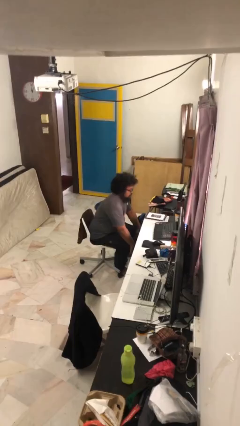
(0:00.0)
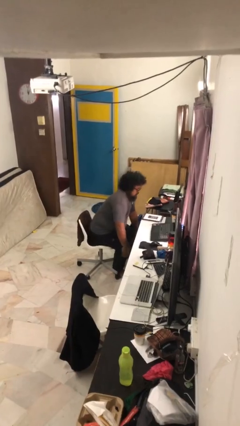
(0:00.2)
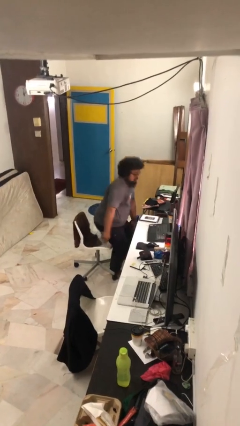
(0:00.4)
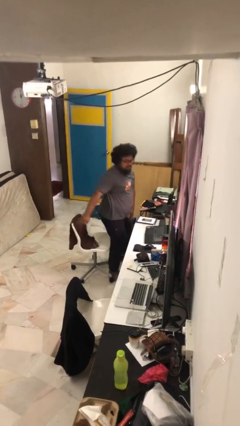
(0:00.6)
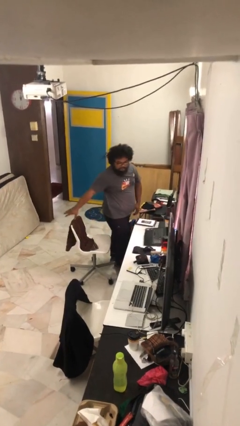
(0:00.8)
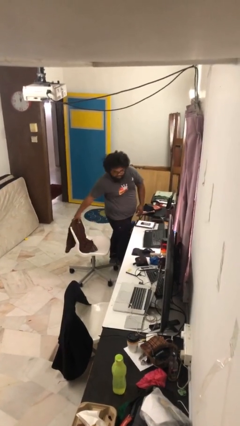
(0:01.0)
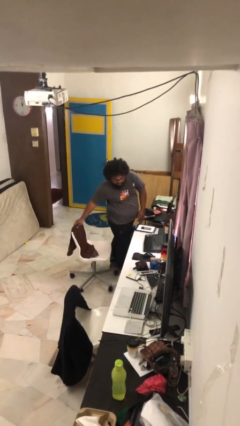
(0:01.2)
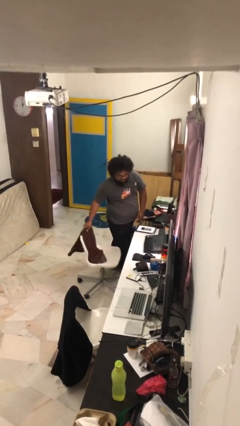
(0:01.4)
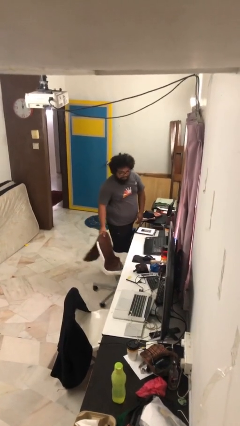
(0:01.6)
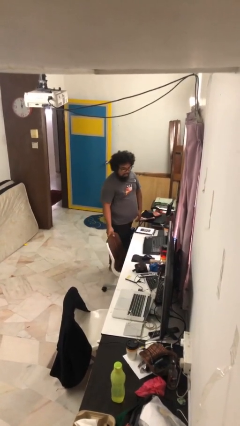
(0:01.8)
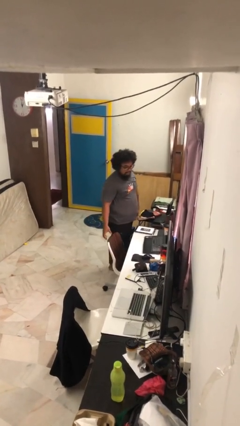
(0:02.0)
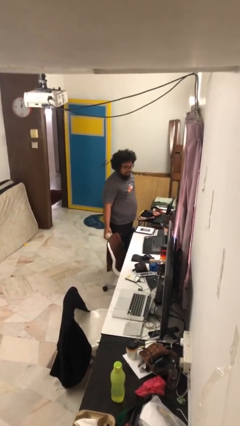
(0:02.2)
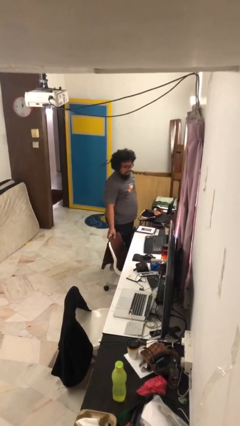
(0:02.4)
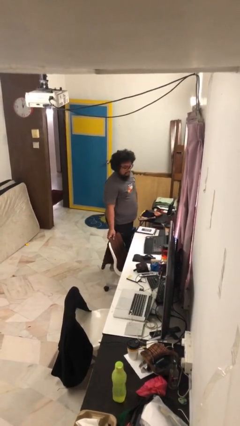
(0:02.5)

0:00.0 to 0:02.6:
person stands up

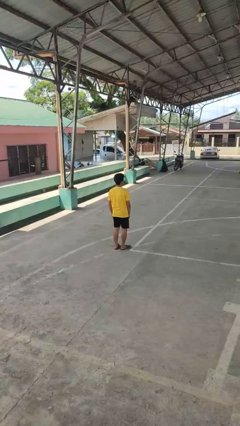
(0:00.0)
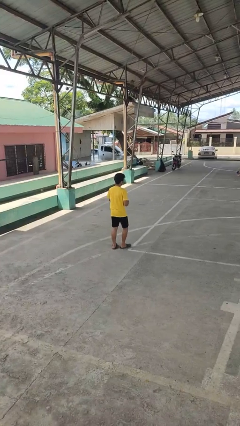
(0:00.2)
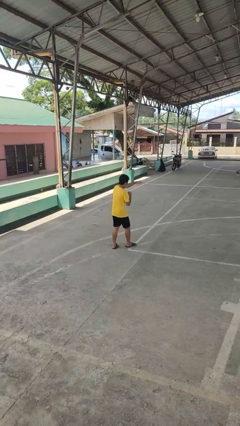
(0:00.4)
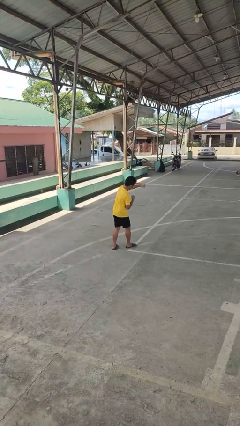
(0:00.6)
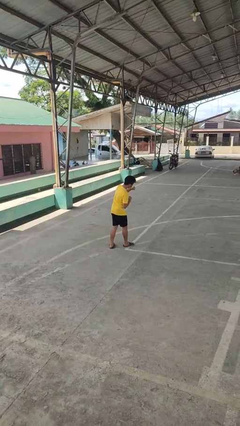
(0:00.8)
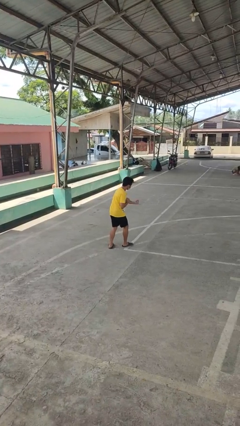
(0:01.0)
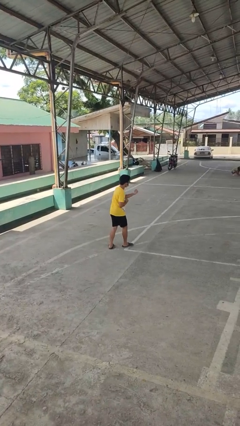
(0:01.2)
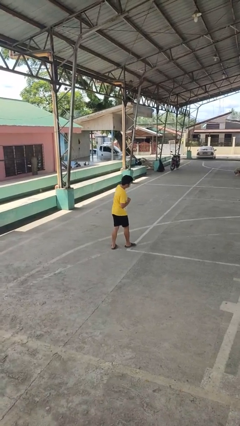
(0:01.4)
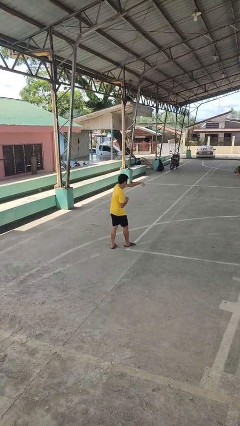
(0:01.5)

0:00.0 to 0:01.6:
person punches

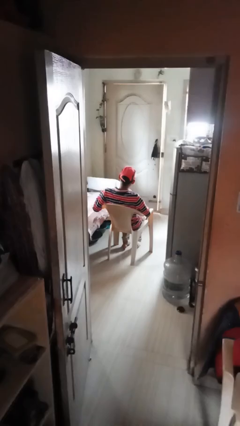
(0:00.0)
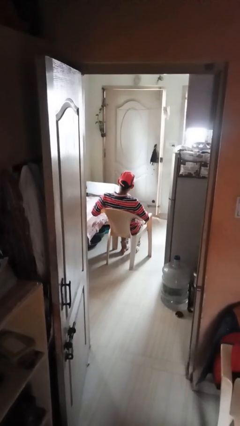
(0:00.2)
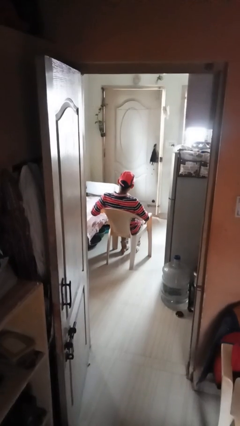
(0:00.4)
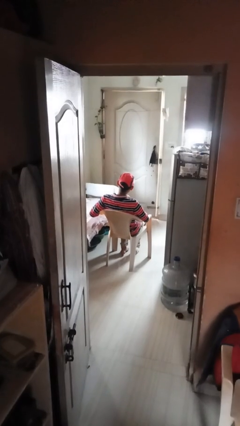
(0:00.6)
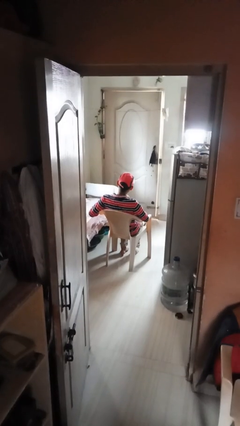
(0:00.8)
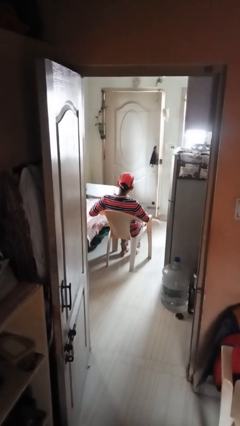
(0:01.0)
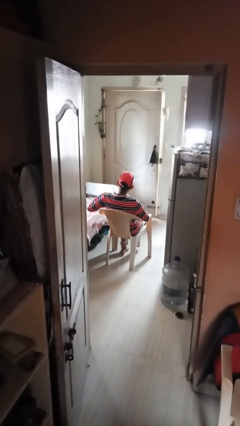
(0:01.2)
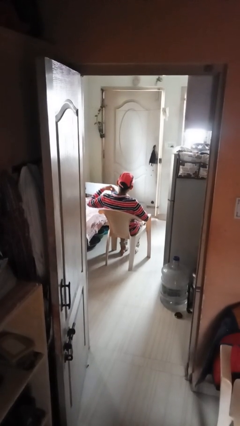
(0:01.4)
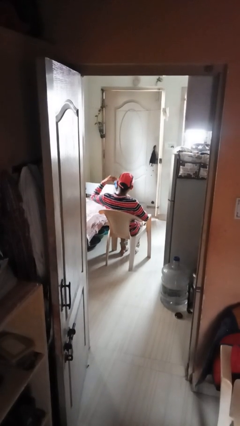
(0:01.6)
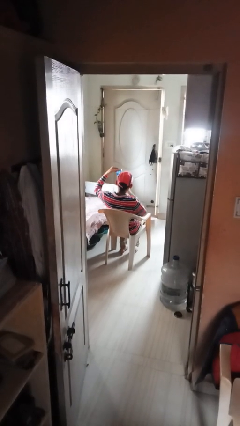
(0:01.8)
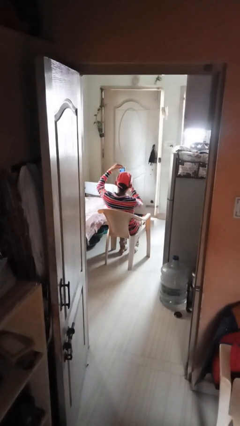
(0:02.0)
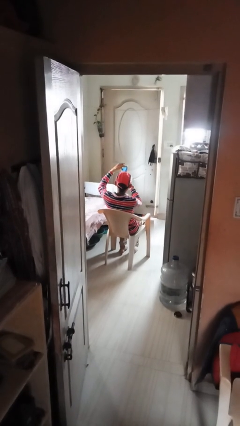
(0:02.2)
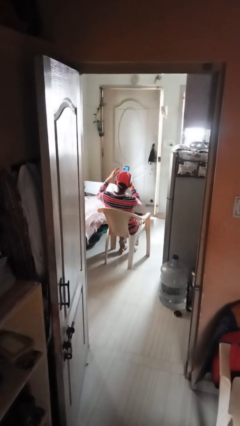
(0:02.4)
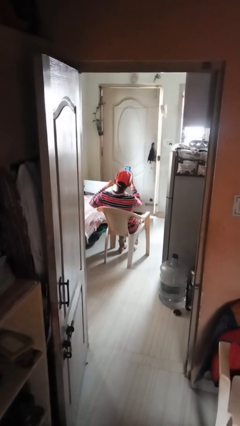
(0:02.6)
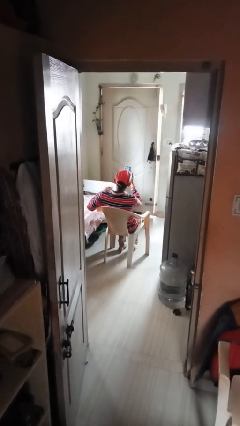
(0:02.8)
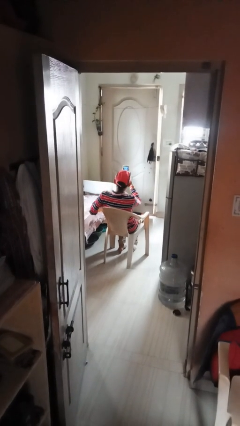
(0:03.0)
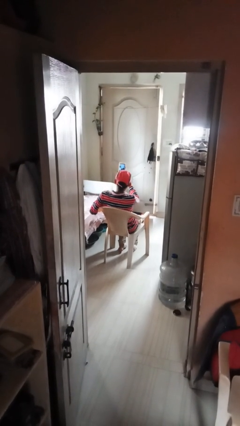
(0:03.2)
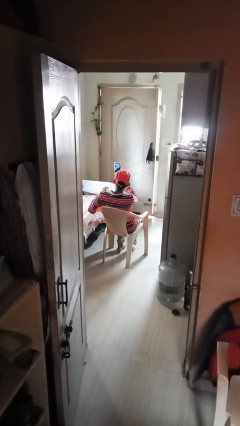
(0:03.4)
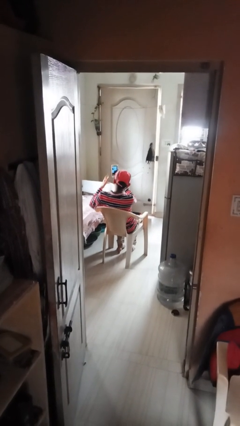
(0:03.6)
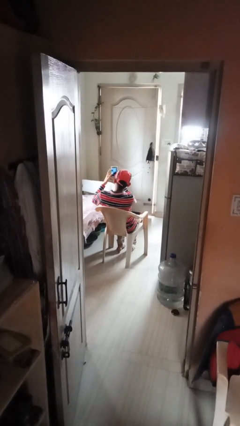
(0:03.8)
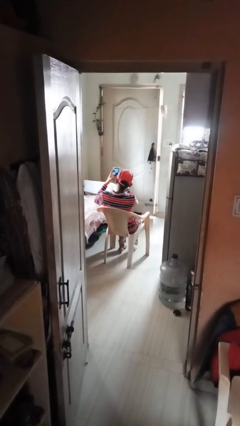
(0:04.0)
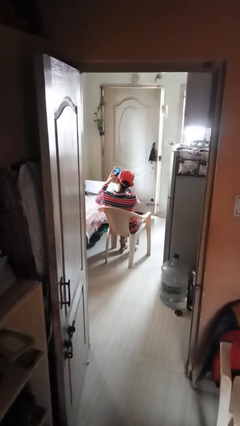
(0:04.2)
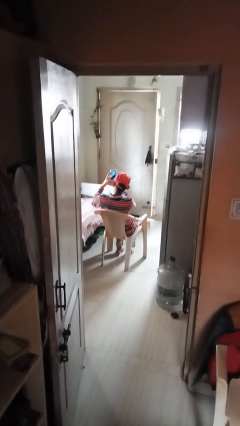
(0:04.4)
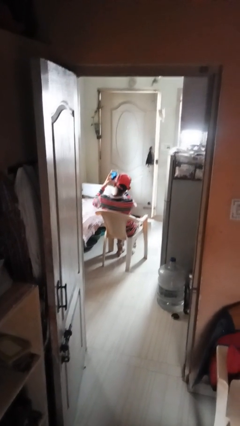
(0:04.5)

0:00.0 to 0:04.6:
person takes phone from pocket

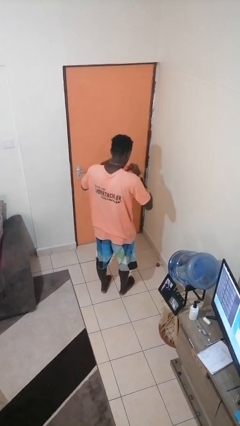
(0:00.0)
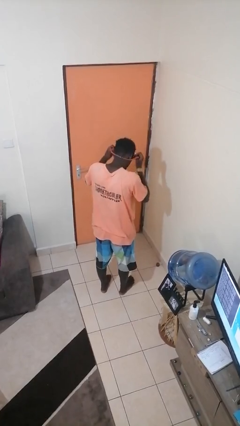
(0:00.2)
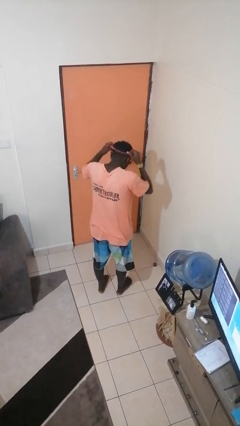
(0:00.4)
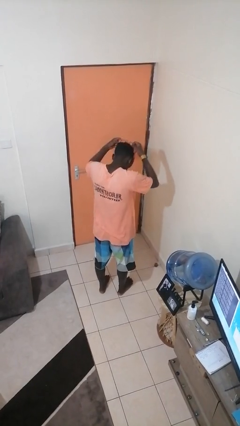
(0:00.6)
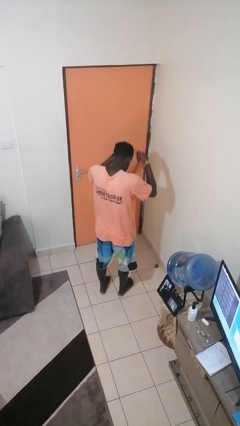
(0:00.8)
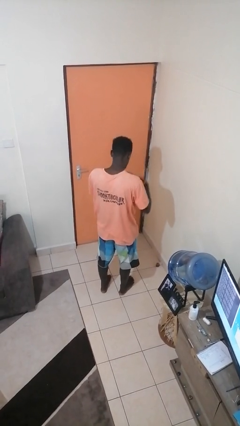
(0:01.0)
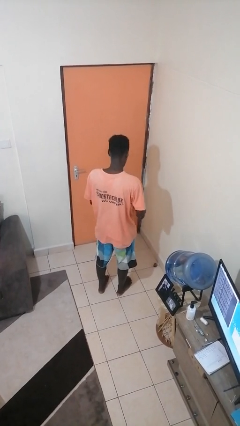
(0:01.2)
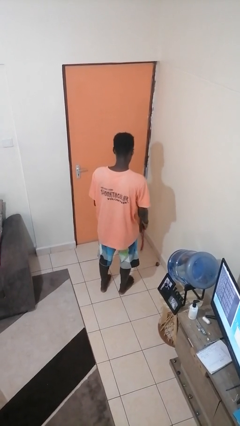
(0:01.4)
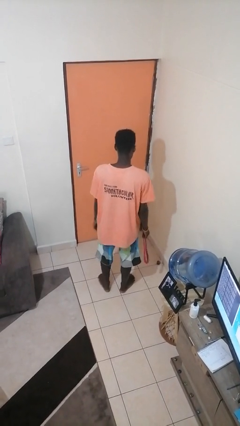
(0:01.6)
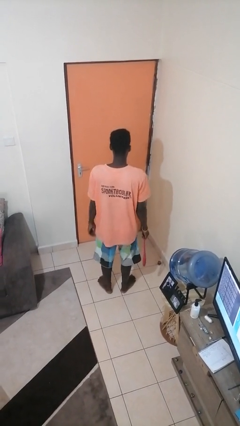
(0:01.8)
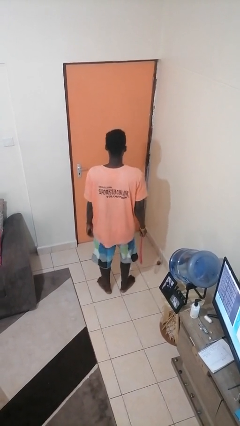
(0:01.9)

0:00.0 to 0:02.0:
person takes off necklace

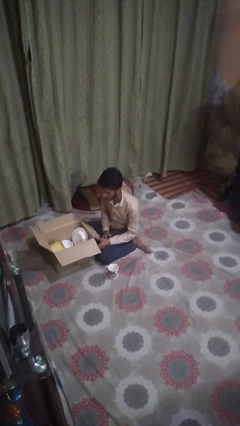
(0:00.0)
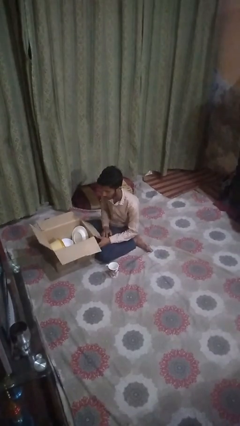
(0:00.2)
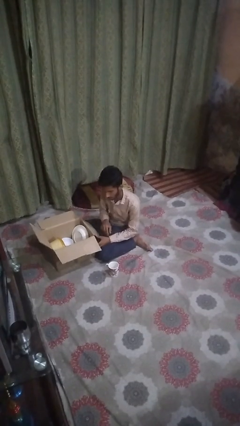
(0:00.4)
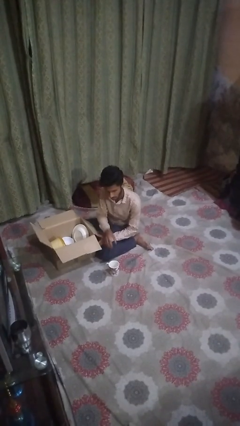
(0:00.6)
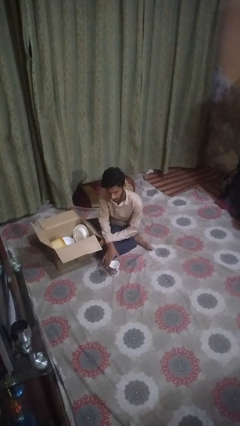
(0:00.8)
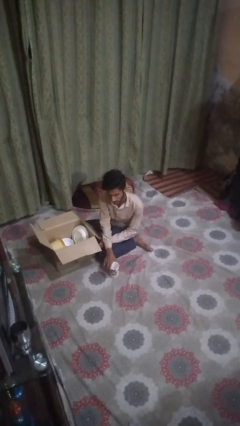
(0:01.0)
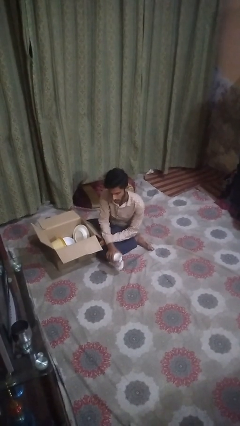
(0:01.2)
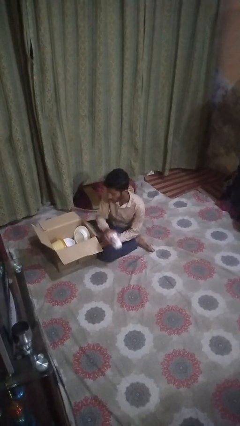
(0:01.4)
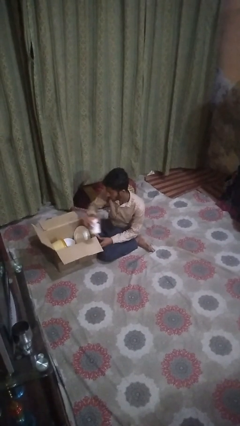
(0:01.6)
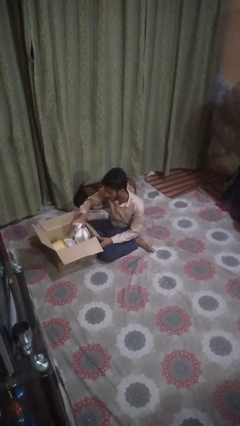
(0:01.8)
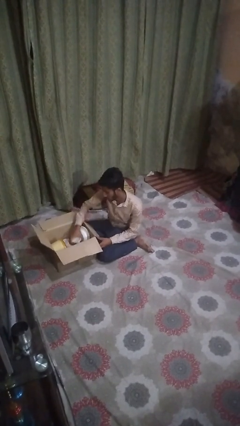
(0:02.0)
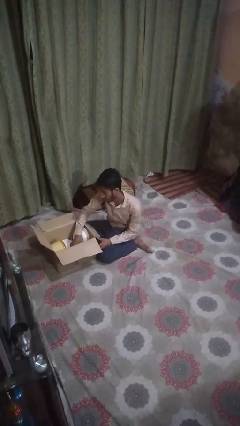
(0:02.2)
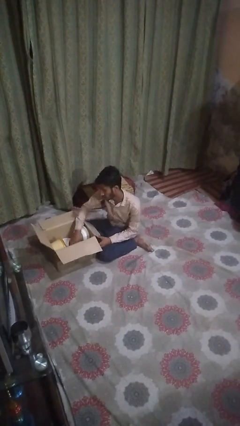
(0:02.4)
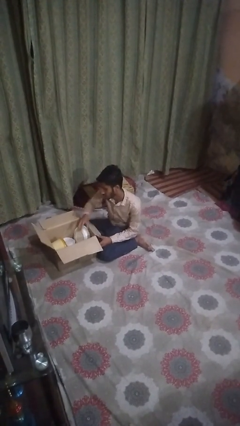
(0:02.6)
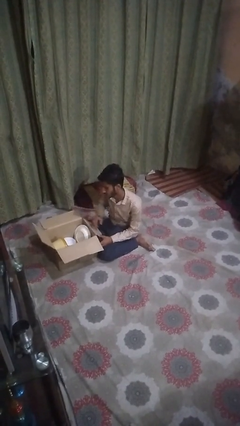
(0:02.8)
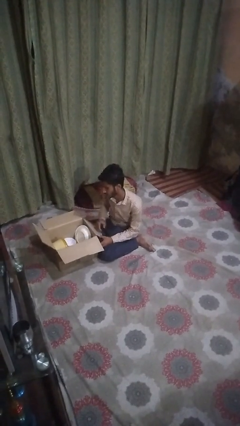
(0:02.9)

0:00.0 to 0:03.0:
person puts object into box

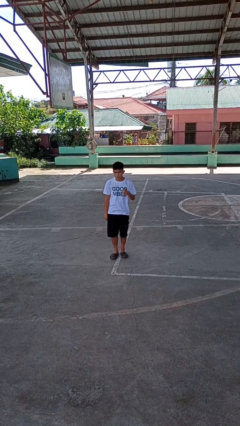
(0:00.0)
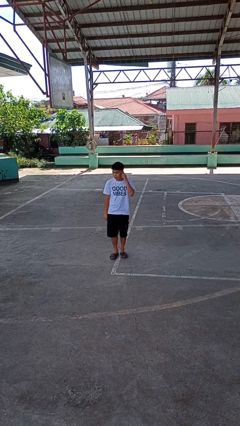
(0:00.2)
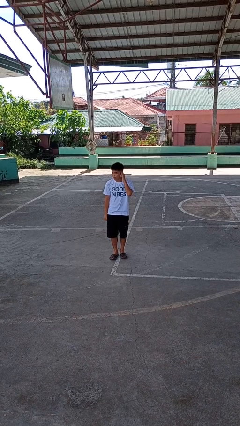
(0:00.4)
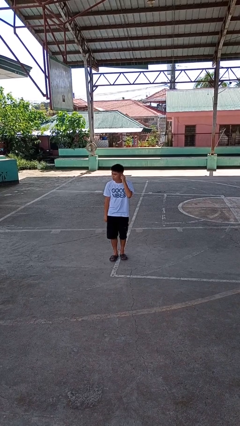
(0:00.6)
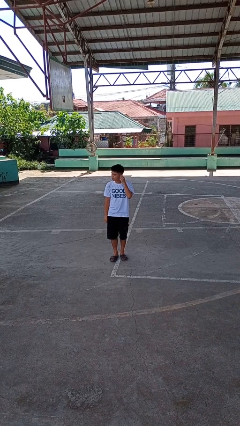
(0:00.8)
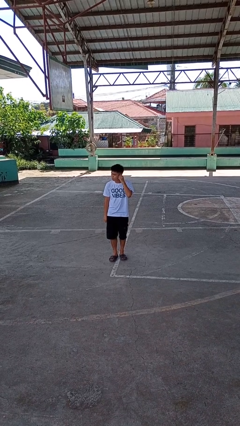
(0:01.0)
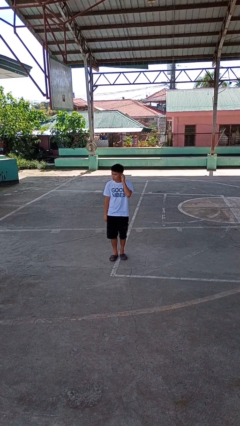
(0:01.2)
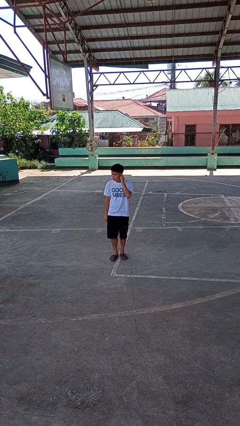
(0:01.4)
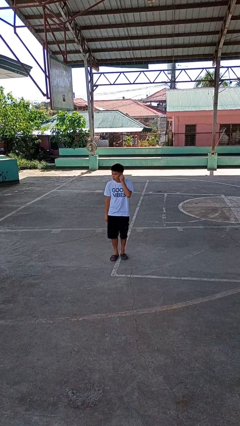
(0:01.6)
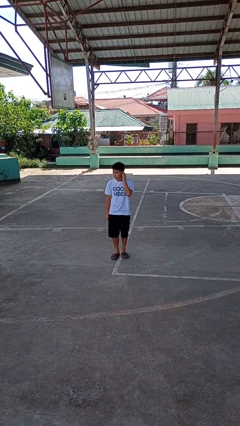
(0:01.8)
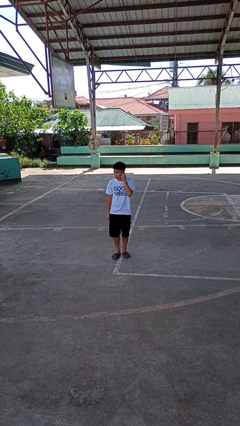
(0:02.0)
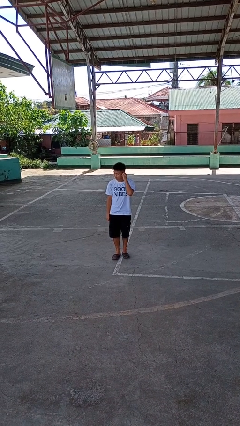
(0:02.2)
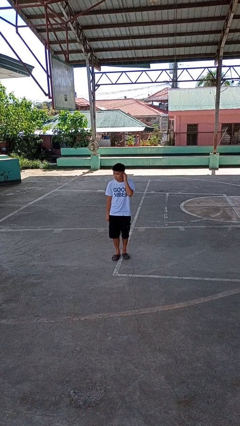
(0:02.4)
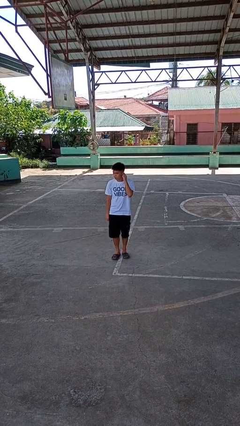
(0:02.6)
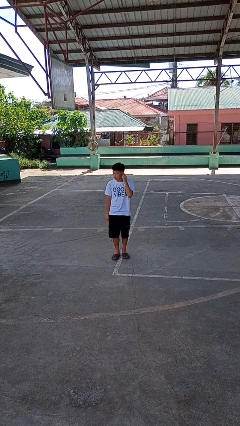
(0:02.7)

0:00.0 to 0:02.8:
person touches earlobe

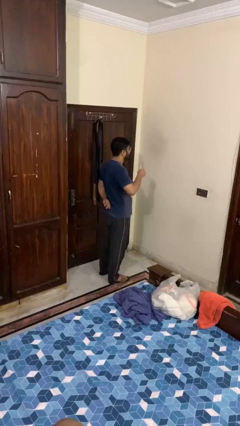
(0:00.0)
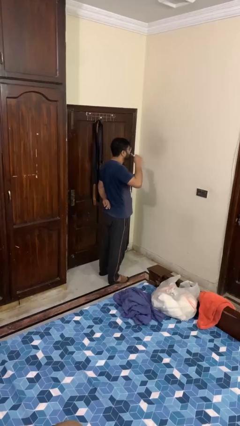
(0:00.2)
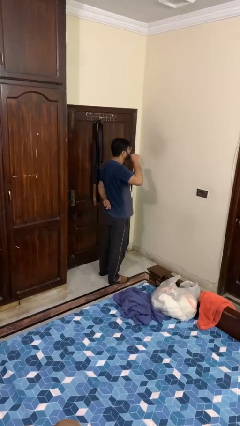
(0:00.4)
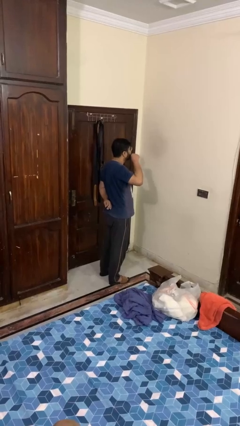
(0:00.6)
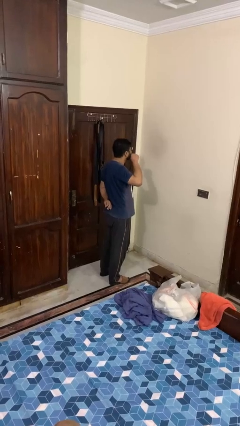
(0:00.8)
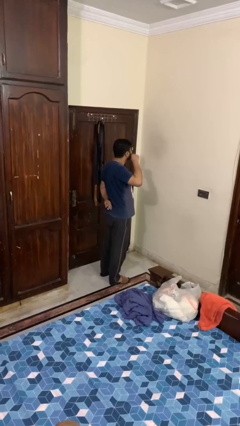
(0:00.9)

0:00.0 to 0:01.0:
person brushes teeth
